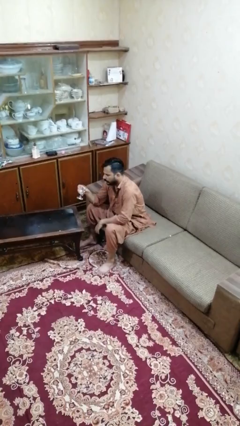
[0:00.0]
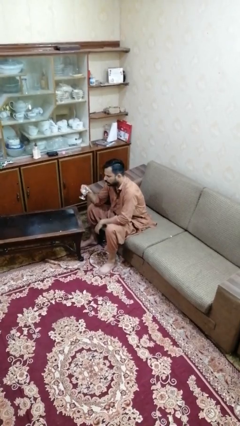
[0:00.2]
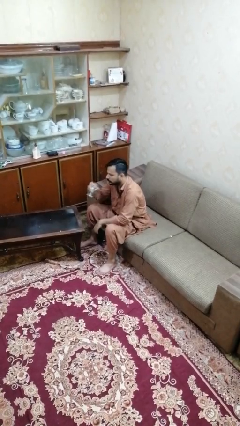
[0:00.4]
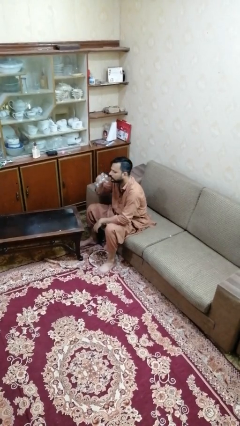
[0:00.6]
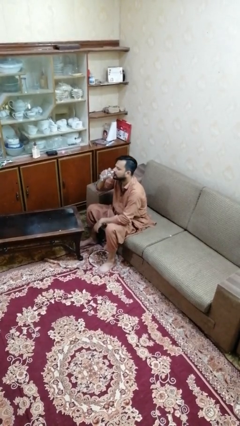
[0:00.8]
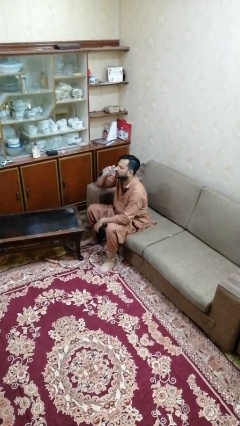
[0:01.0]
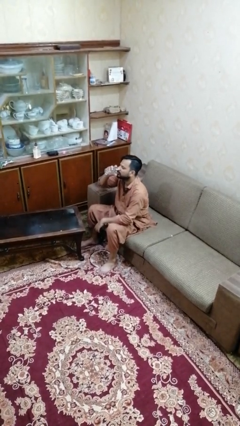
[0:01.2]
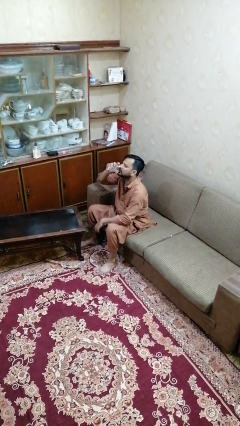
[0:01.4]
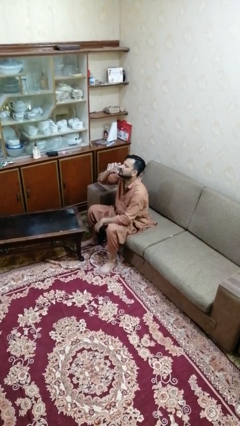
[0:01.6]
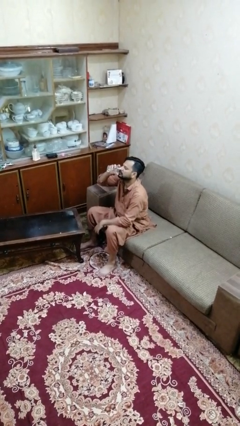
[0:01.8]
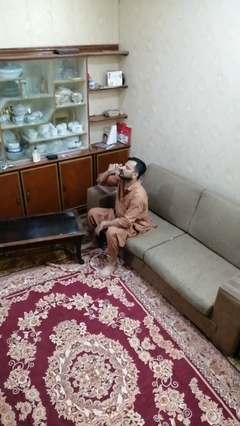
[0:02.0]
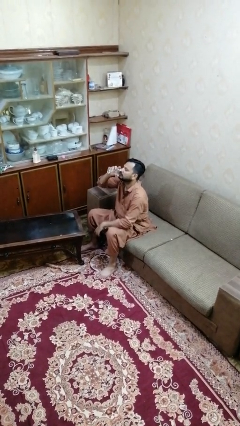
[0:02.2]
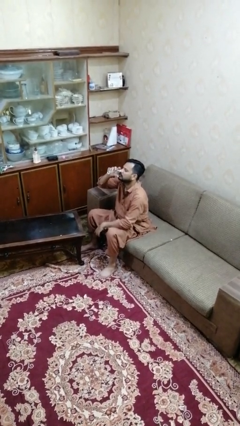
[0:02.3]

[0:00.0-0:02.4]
person drinks from shotglass

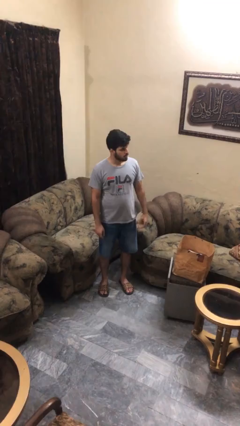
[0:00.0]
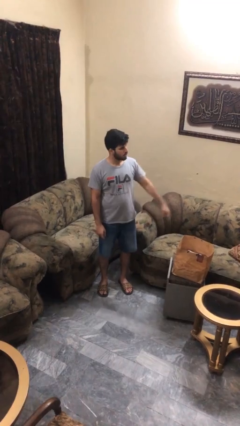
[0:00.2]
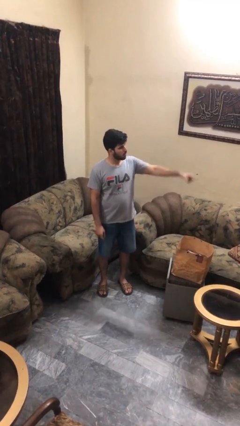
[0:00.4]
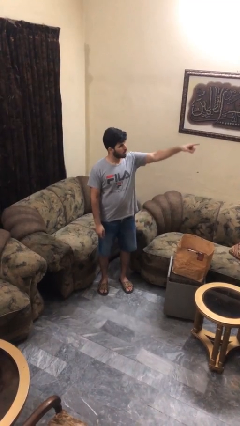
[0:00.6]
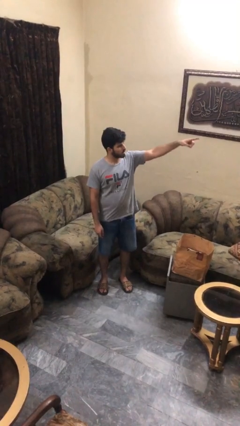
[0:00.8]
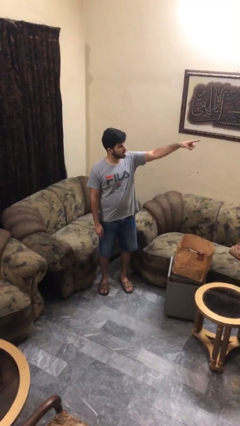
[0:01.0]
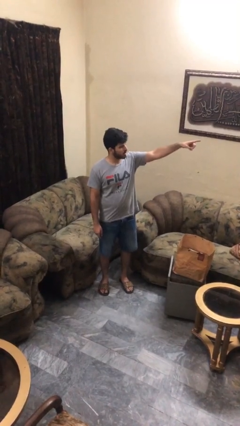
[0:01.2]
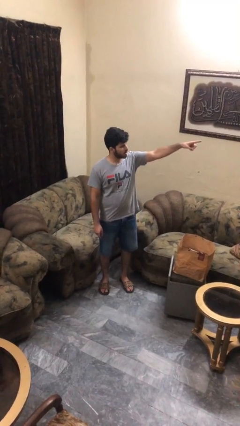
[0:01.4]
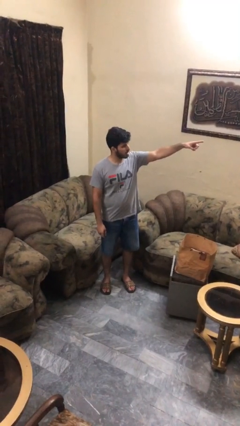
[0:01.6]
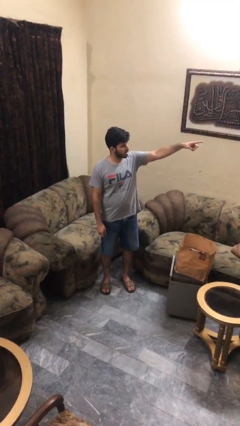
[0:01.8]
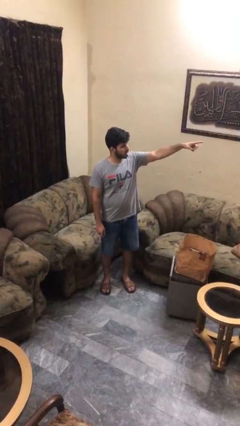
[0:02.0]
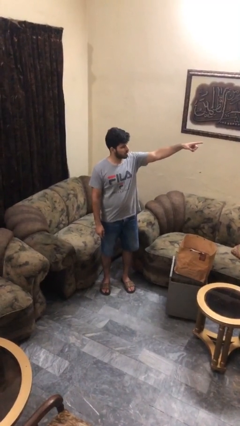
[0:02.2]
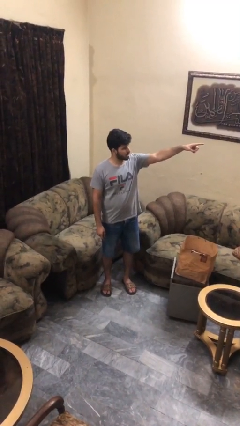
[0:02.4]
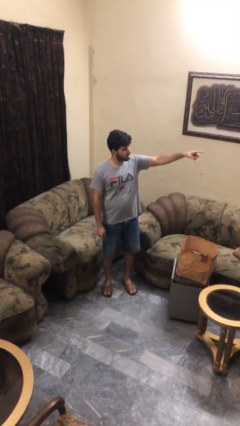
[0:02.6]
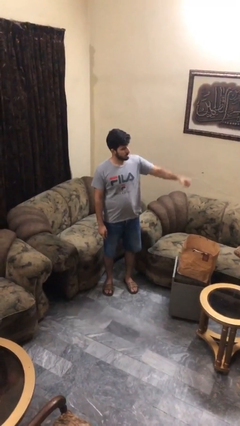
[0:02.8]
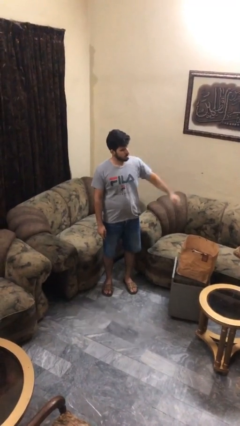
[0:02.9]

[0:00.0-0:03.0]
person points at person

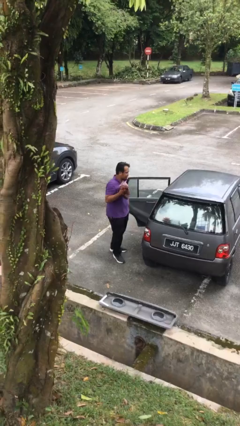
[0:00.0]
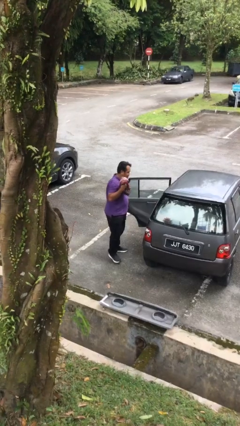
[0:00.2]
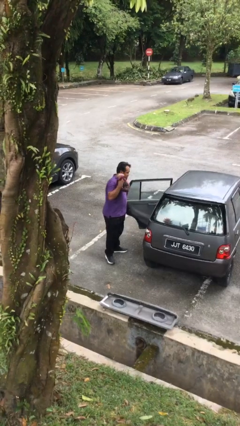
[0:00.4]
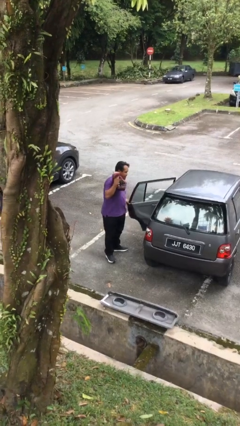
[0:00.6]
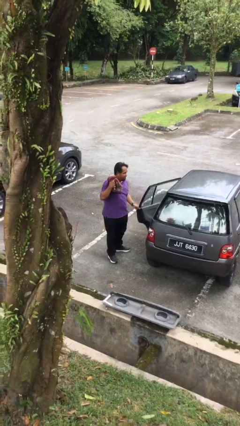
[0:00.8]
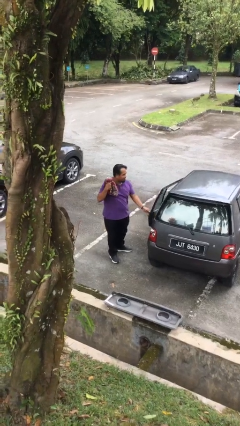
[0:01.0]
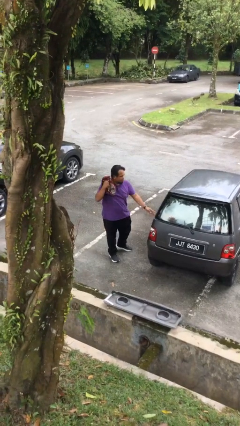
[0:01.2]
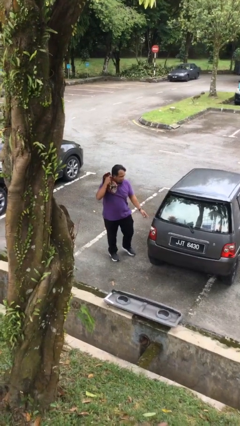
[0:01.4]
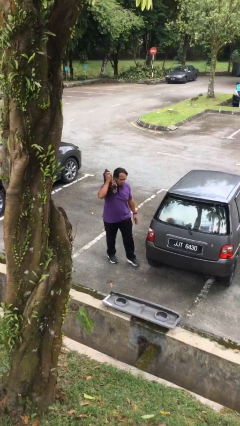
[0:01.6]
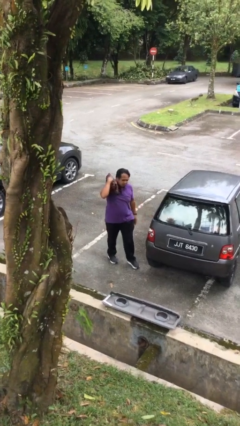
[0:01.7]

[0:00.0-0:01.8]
person closes car door

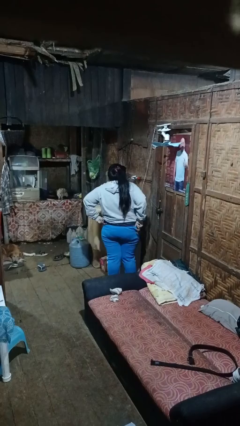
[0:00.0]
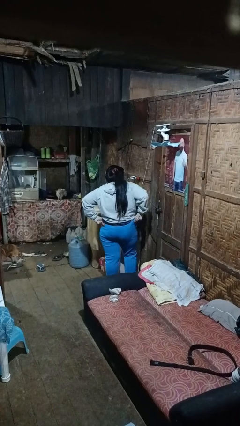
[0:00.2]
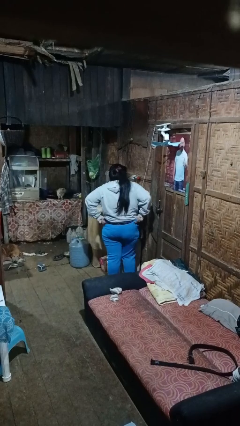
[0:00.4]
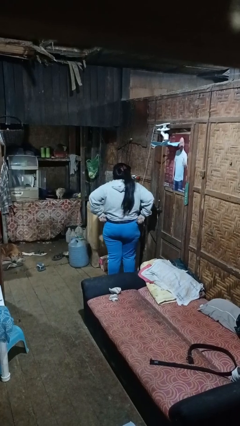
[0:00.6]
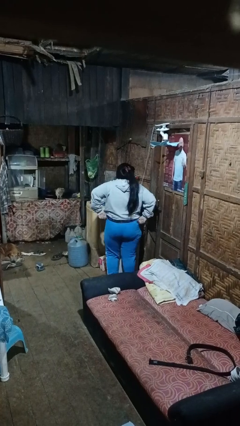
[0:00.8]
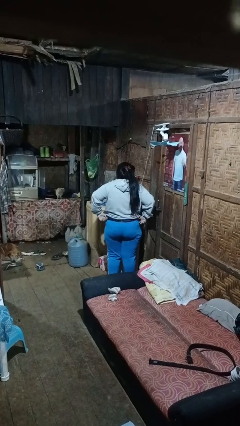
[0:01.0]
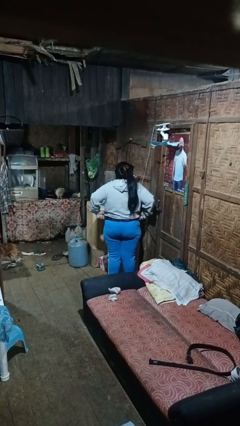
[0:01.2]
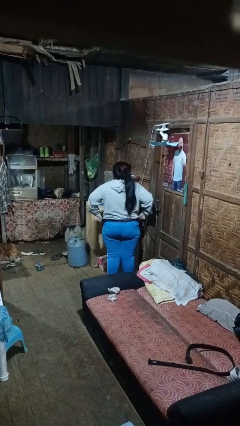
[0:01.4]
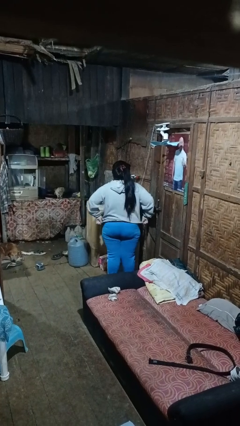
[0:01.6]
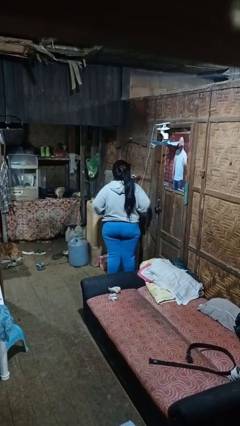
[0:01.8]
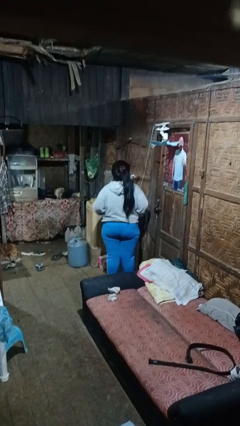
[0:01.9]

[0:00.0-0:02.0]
person hikes up pants

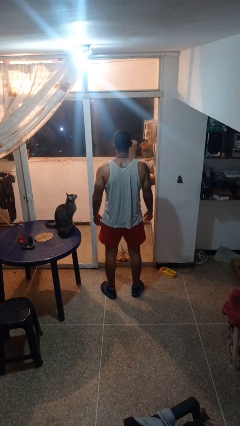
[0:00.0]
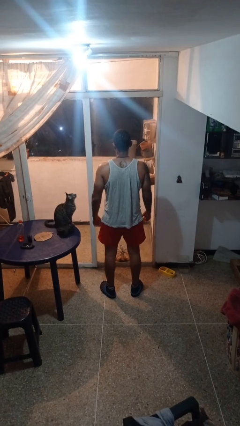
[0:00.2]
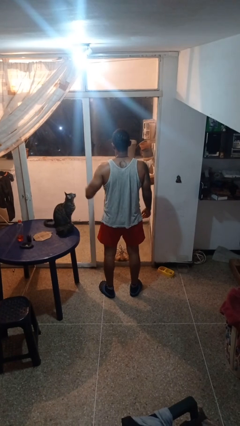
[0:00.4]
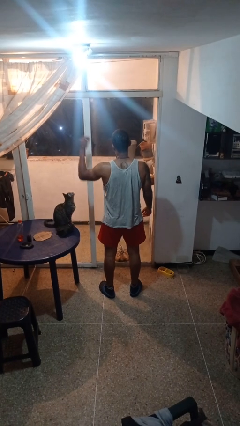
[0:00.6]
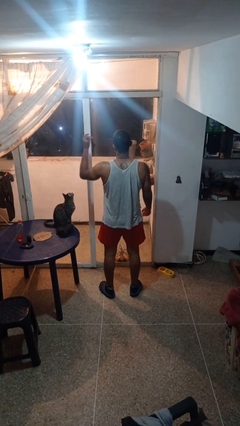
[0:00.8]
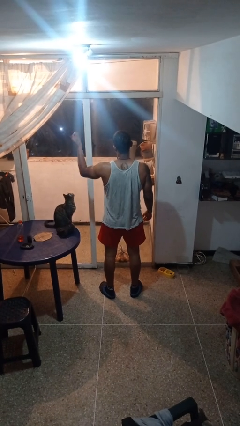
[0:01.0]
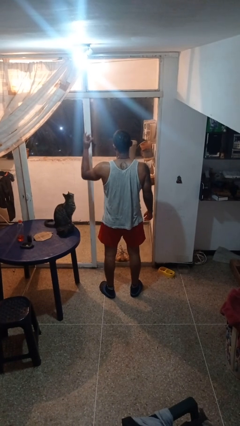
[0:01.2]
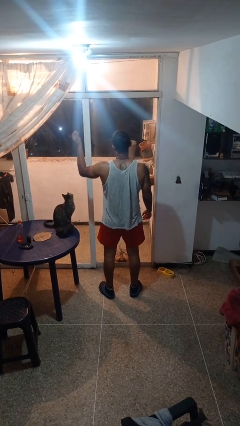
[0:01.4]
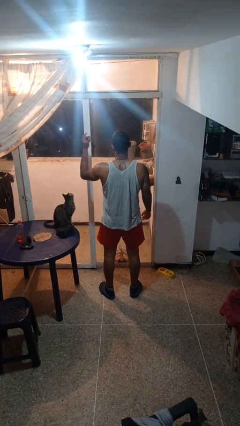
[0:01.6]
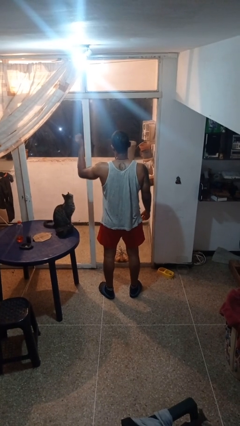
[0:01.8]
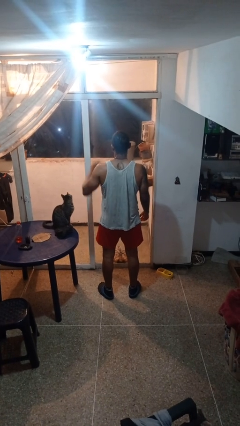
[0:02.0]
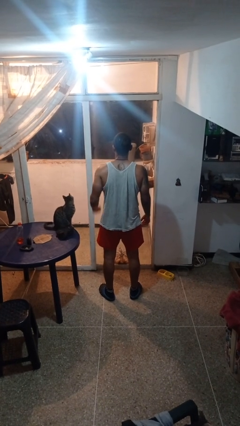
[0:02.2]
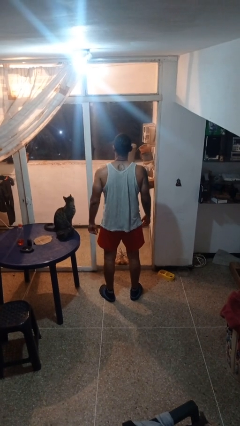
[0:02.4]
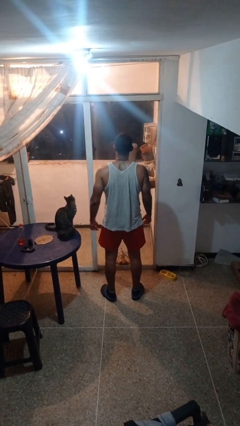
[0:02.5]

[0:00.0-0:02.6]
person snaps fingers

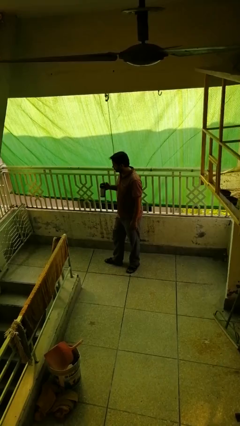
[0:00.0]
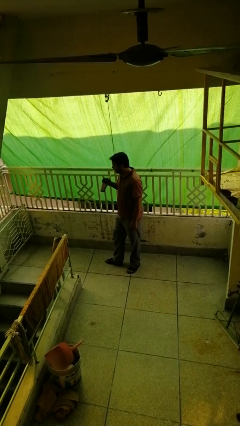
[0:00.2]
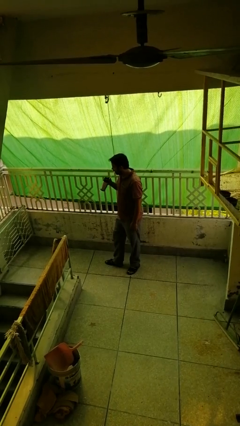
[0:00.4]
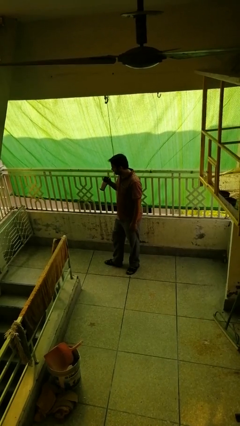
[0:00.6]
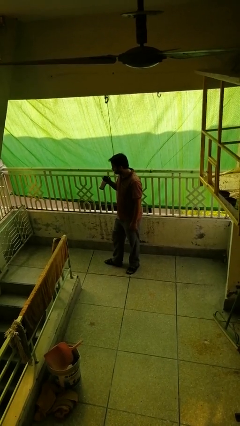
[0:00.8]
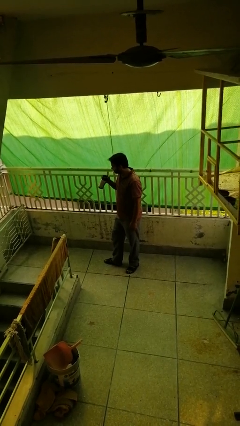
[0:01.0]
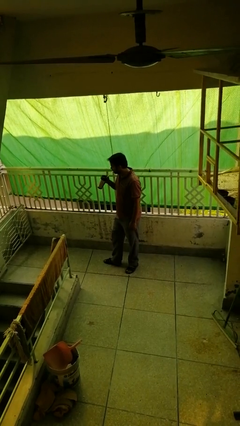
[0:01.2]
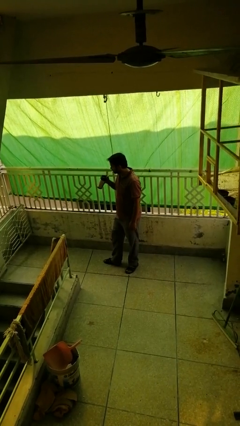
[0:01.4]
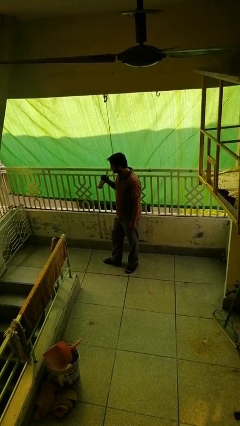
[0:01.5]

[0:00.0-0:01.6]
person drinks from straw

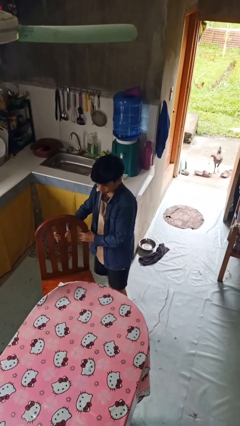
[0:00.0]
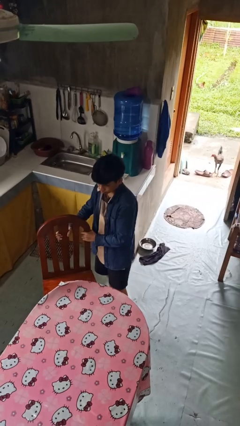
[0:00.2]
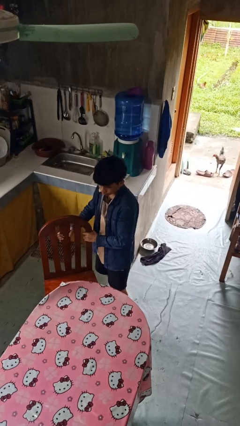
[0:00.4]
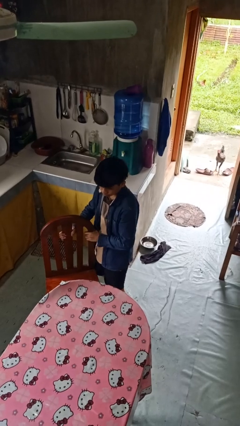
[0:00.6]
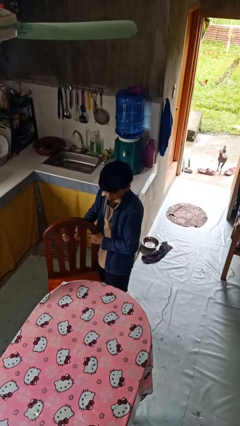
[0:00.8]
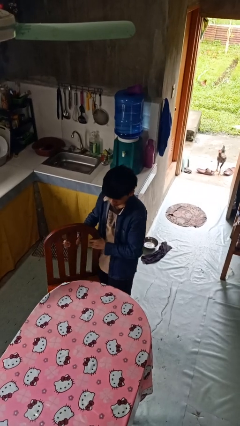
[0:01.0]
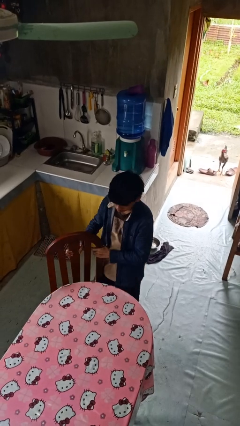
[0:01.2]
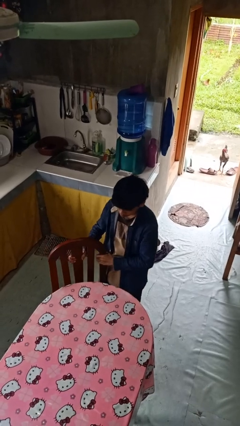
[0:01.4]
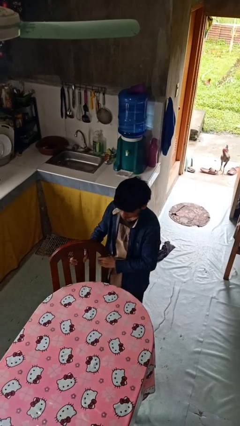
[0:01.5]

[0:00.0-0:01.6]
person pushes in chair

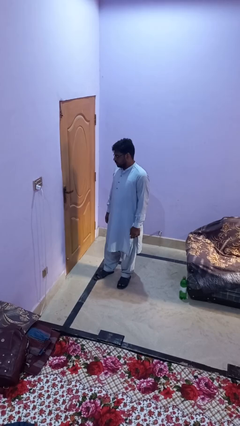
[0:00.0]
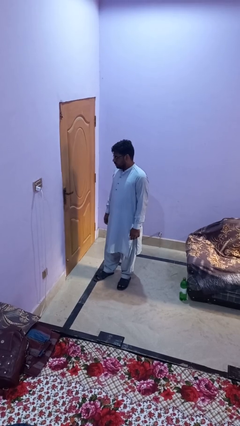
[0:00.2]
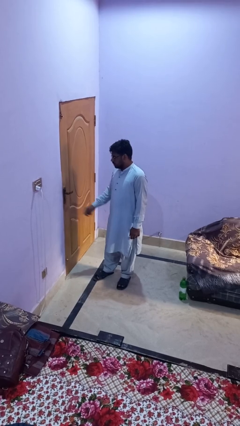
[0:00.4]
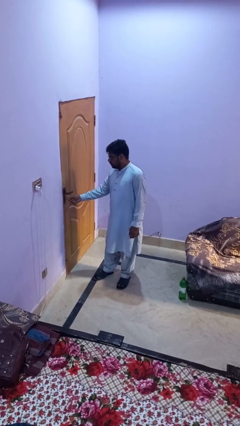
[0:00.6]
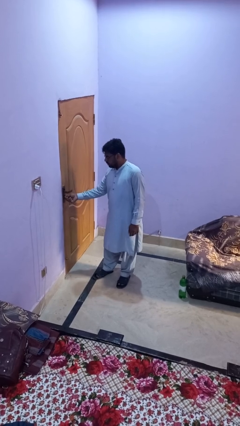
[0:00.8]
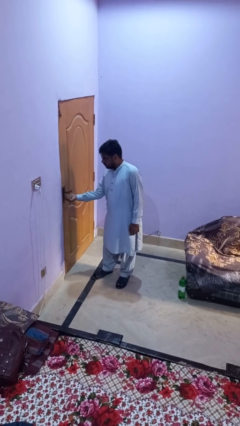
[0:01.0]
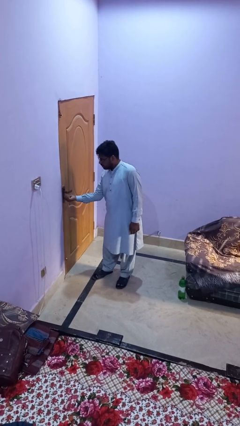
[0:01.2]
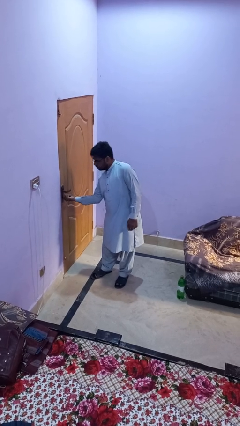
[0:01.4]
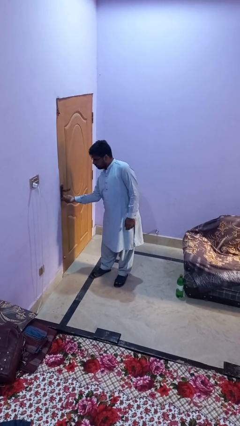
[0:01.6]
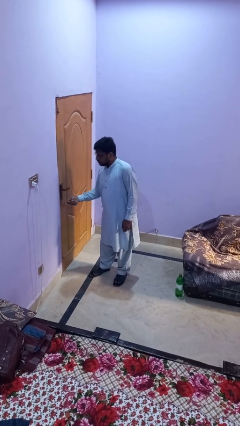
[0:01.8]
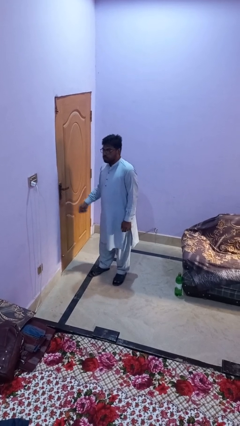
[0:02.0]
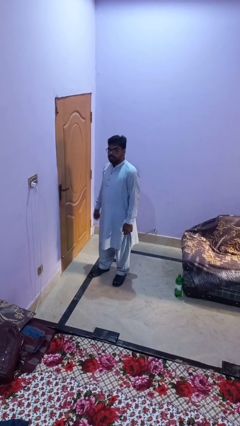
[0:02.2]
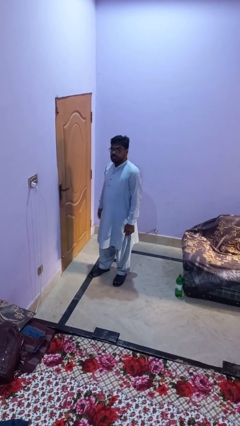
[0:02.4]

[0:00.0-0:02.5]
person unlocks door with keys
